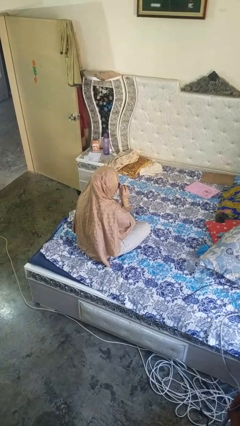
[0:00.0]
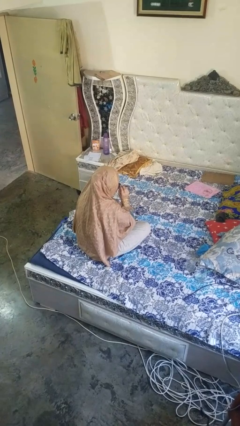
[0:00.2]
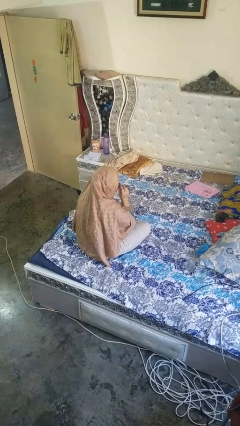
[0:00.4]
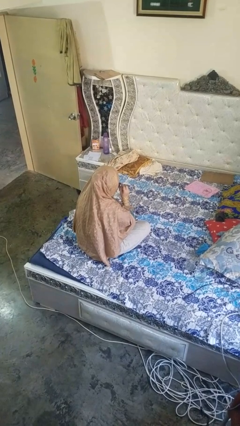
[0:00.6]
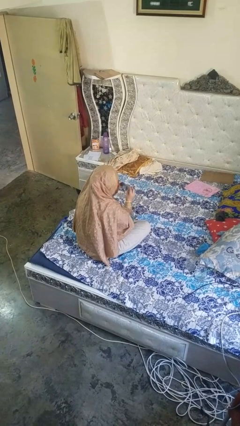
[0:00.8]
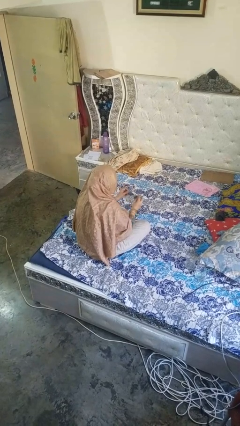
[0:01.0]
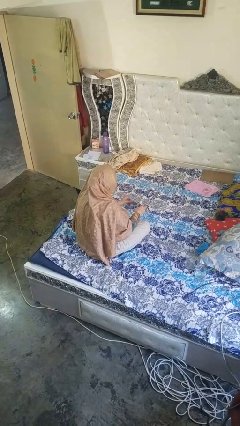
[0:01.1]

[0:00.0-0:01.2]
person takes off glasses

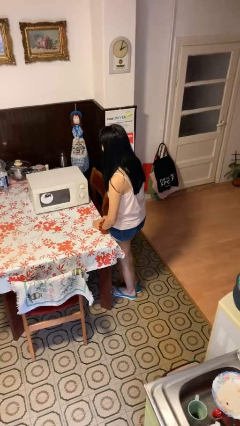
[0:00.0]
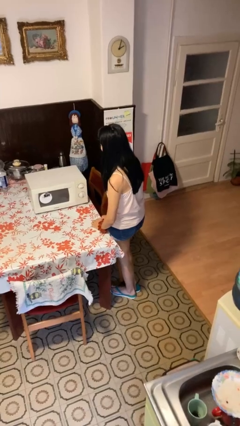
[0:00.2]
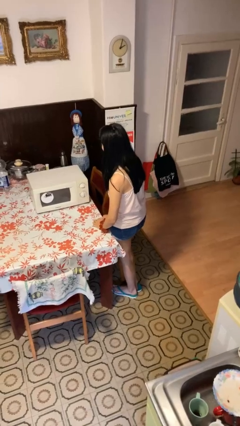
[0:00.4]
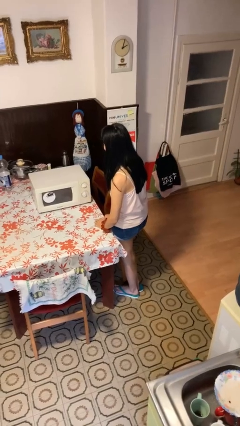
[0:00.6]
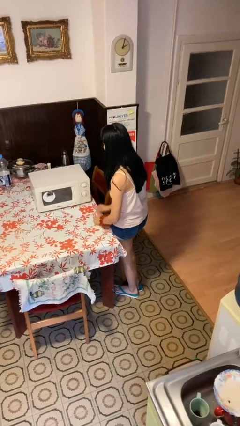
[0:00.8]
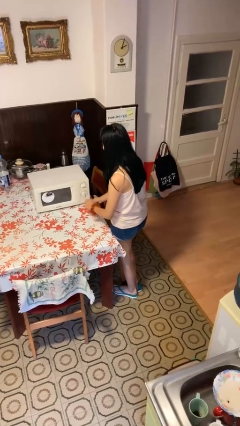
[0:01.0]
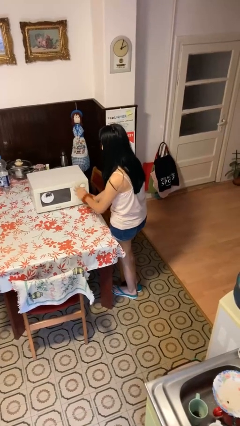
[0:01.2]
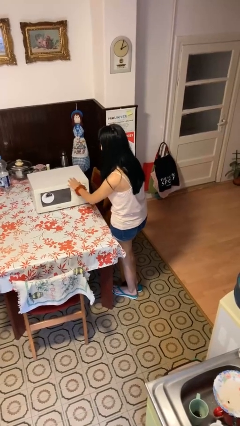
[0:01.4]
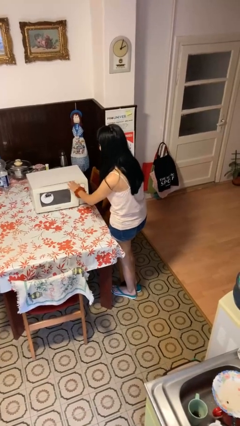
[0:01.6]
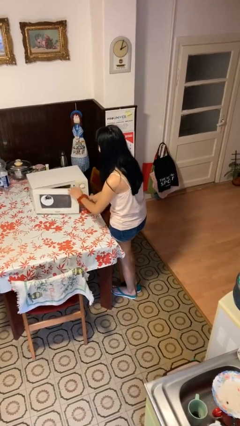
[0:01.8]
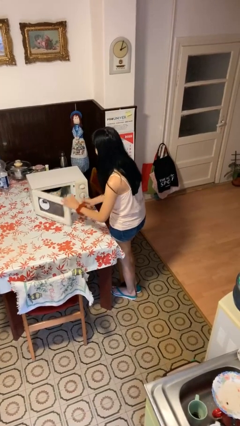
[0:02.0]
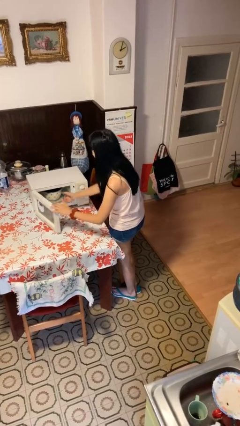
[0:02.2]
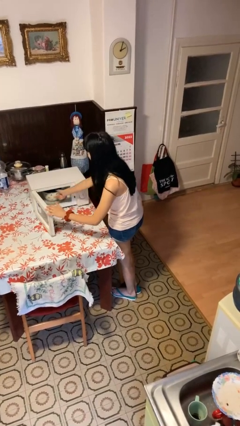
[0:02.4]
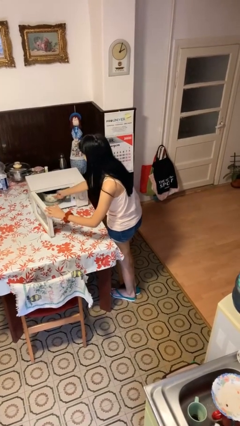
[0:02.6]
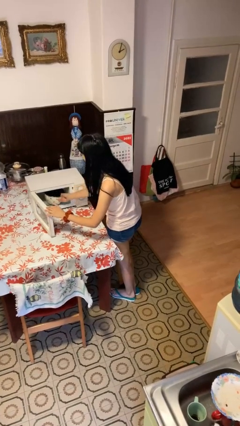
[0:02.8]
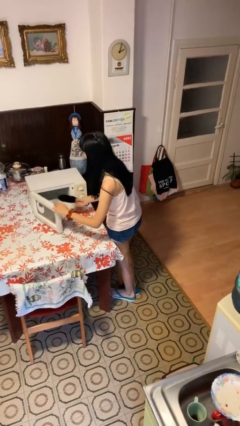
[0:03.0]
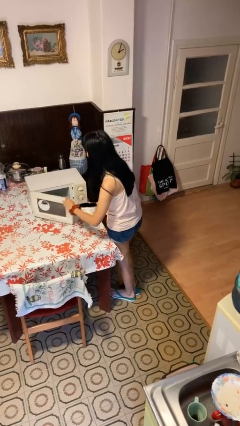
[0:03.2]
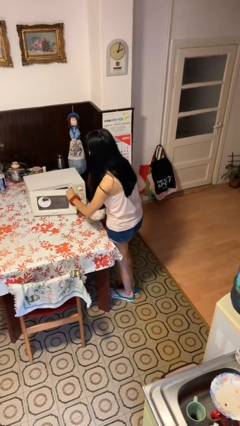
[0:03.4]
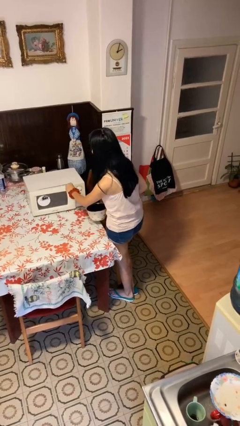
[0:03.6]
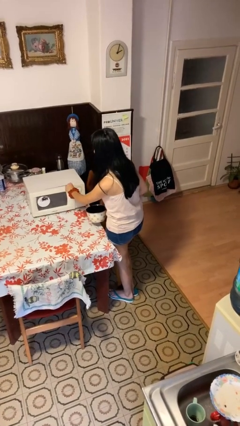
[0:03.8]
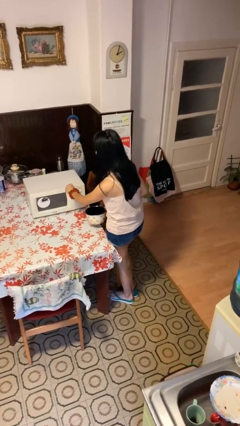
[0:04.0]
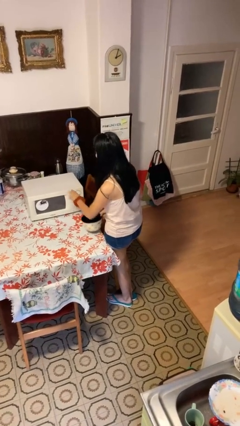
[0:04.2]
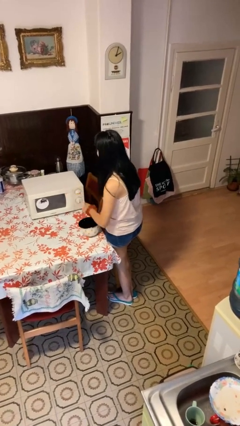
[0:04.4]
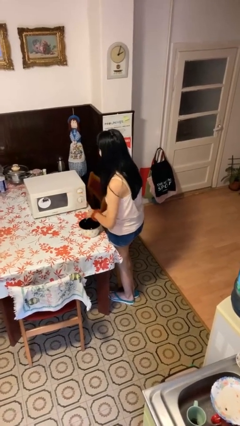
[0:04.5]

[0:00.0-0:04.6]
person takes object from microwave

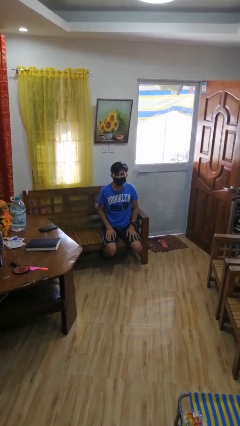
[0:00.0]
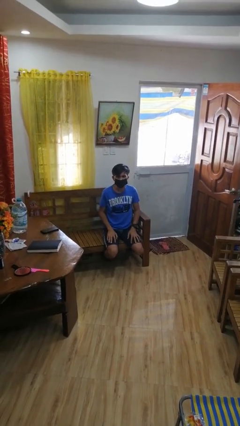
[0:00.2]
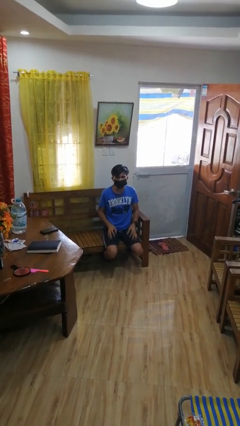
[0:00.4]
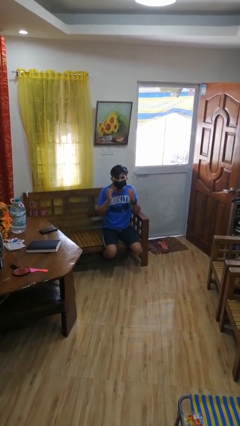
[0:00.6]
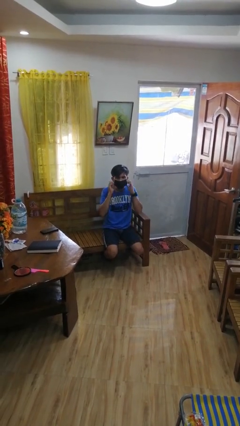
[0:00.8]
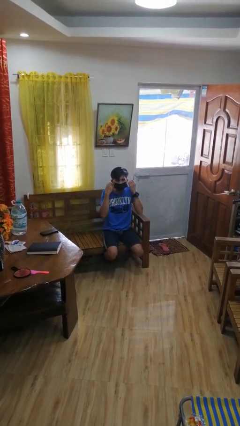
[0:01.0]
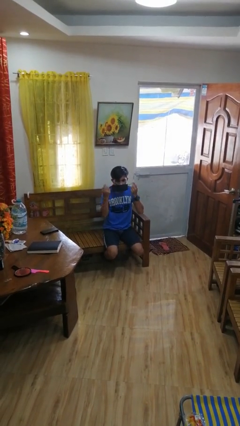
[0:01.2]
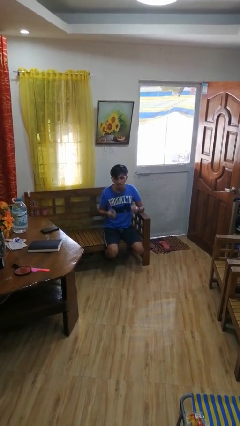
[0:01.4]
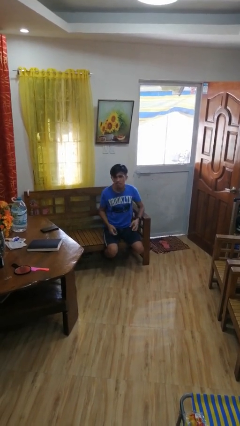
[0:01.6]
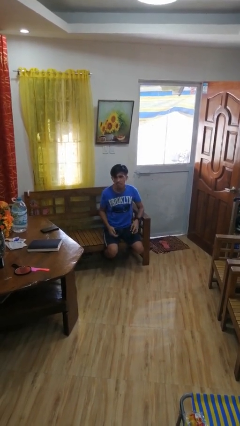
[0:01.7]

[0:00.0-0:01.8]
person takes off facemask

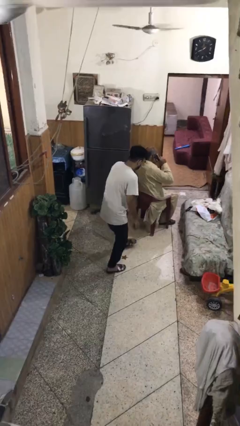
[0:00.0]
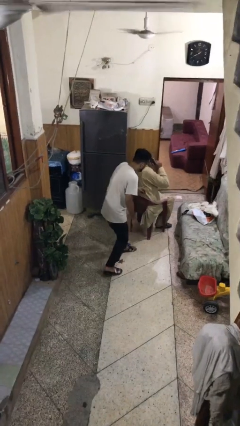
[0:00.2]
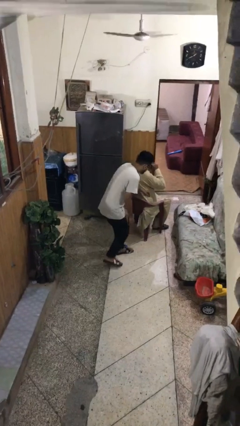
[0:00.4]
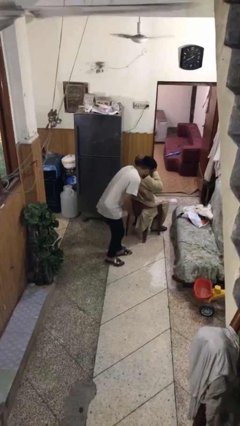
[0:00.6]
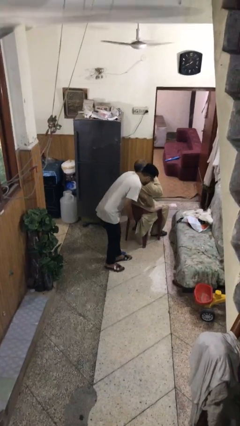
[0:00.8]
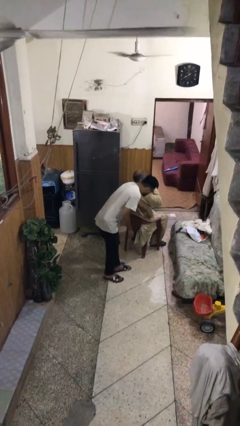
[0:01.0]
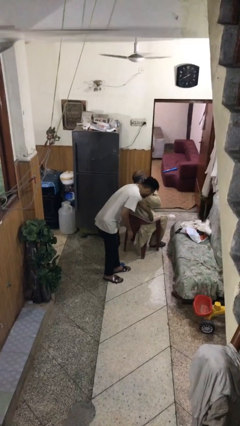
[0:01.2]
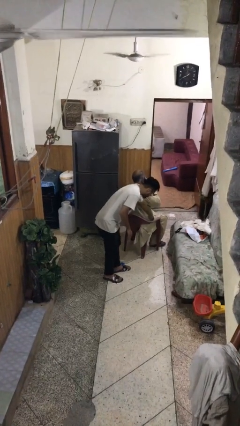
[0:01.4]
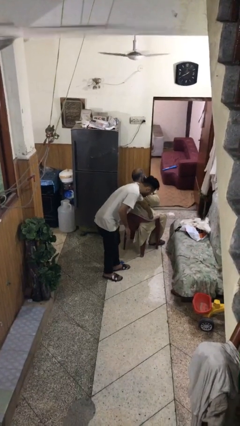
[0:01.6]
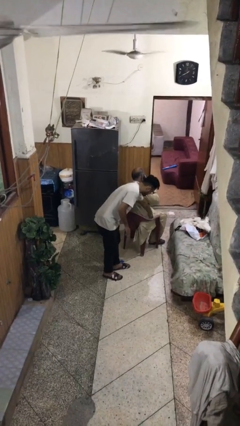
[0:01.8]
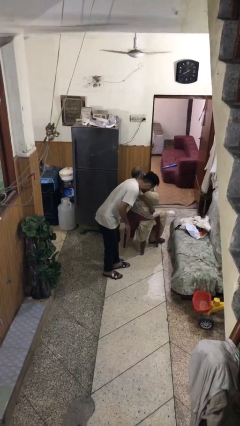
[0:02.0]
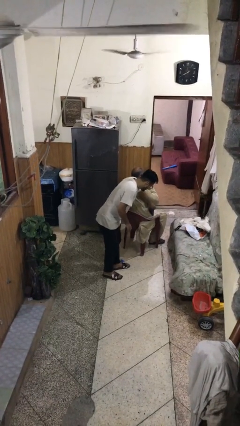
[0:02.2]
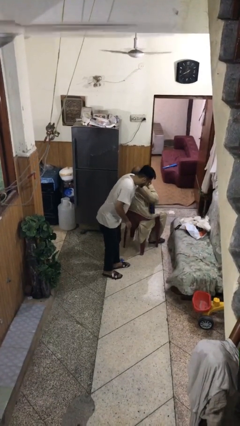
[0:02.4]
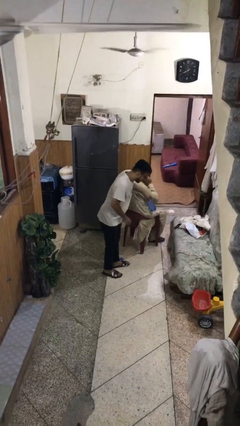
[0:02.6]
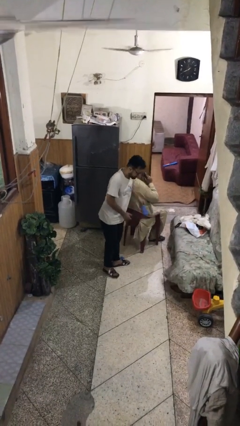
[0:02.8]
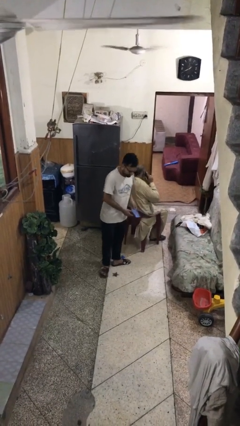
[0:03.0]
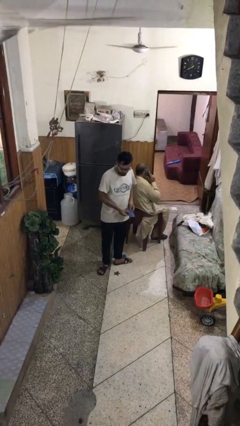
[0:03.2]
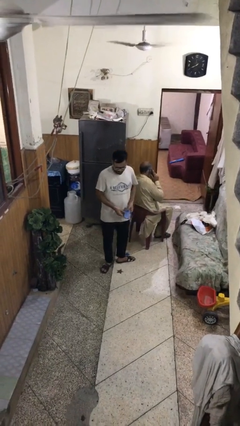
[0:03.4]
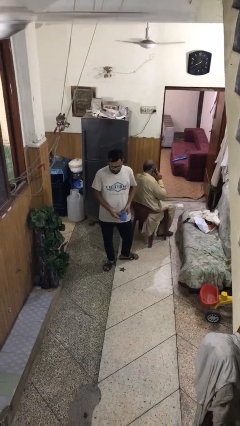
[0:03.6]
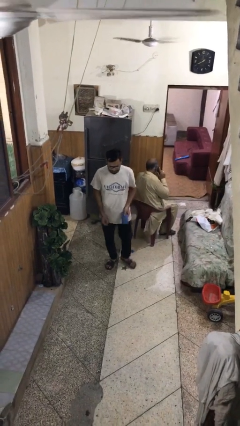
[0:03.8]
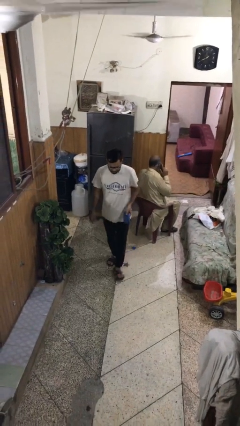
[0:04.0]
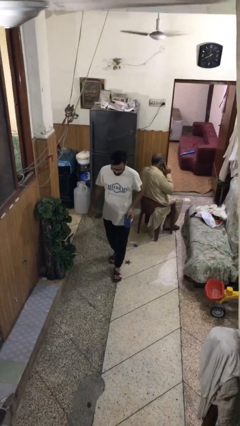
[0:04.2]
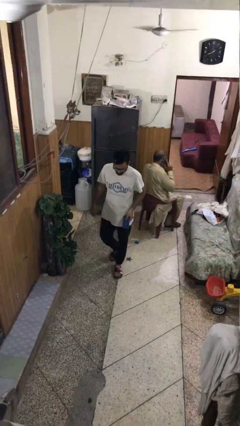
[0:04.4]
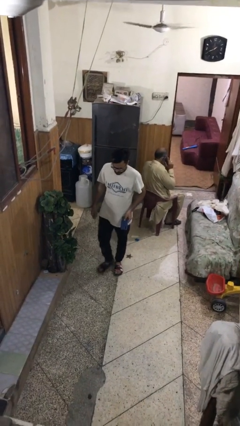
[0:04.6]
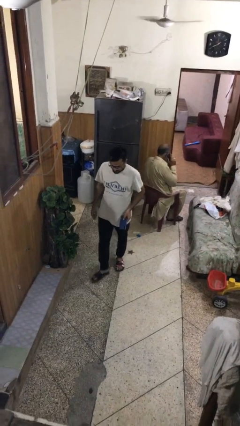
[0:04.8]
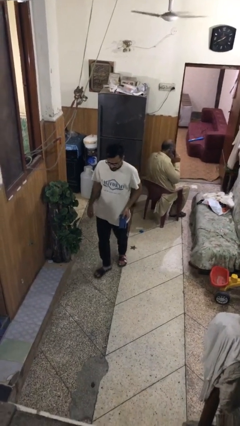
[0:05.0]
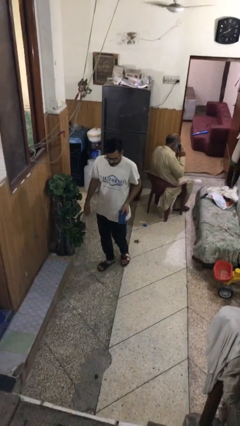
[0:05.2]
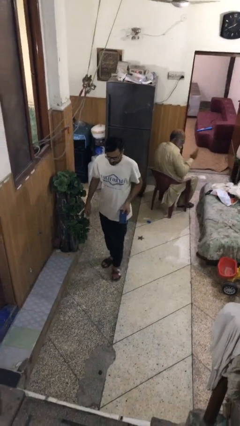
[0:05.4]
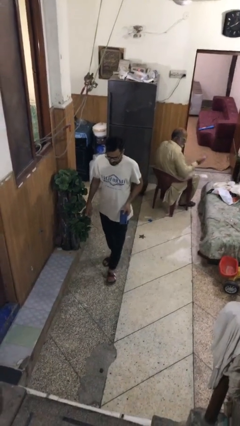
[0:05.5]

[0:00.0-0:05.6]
person steals object from person

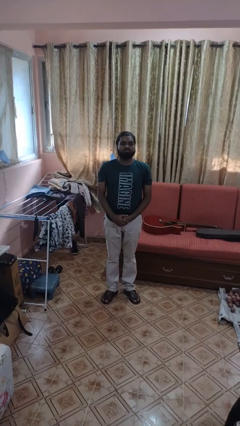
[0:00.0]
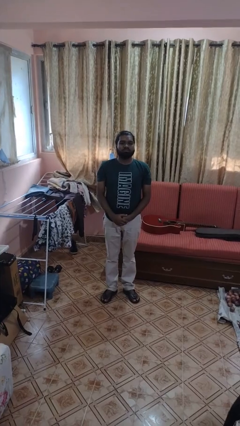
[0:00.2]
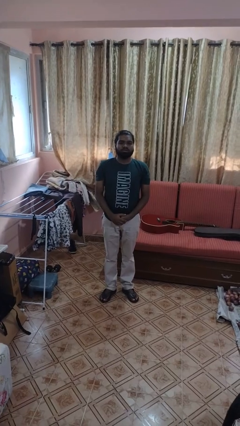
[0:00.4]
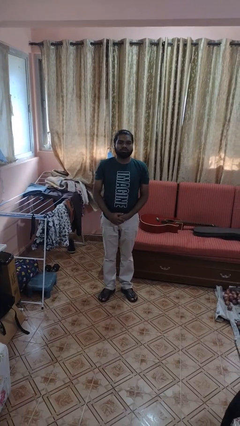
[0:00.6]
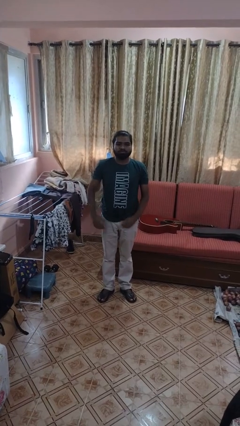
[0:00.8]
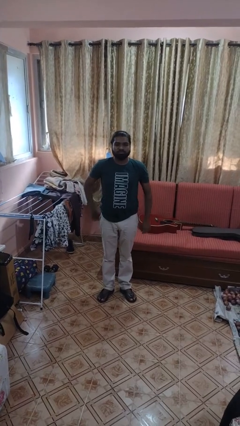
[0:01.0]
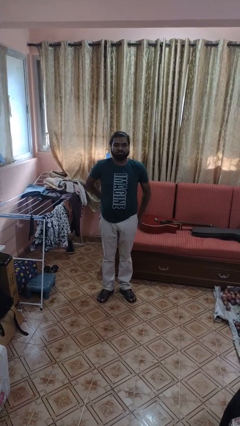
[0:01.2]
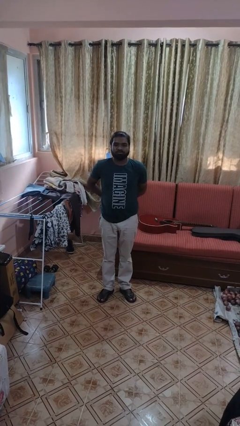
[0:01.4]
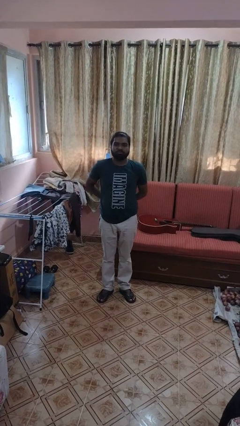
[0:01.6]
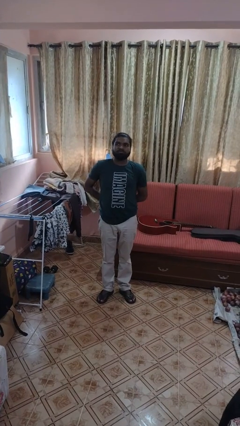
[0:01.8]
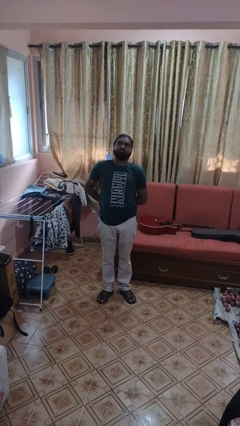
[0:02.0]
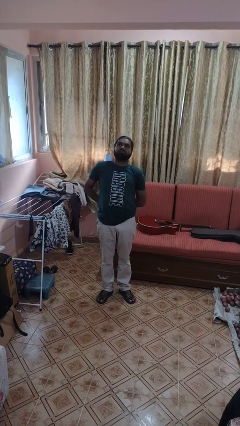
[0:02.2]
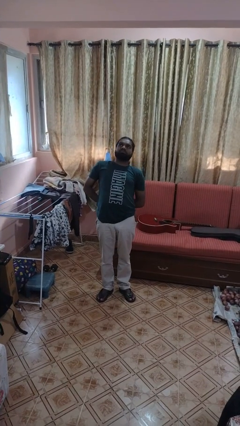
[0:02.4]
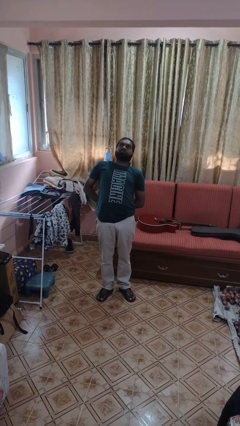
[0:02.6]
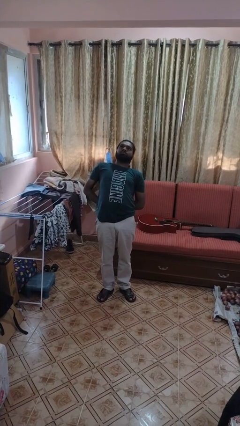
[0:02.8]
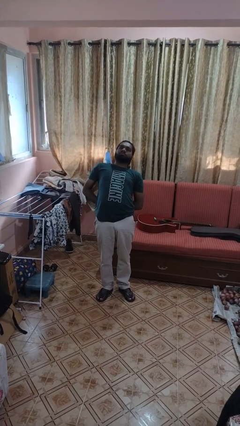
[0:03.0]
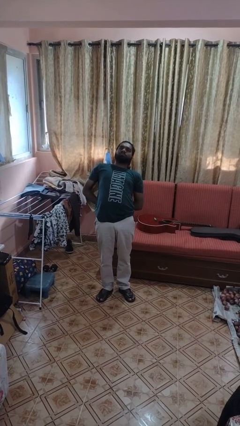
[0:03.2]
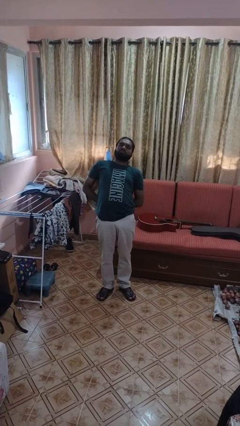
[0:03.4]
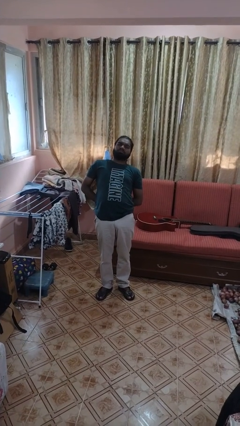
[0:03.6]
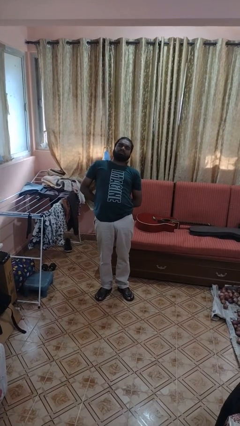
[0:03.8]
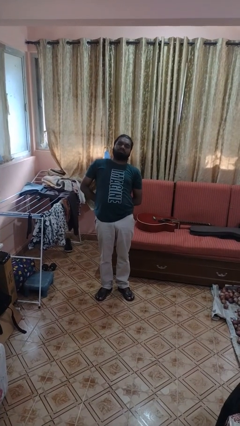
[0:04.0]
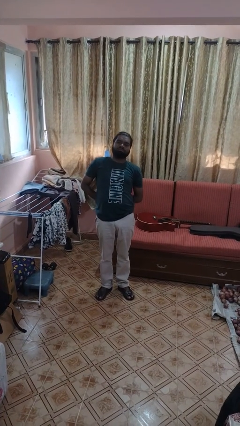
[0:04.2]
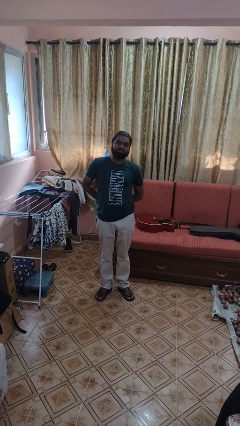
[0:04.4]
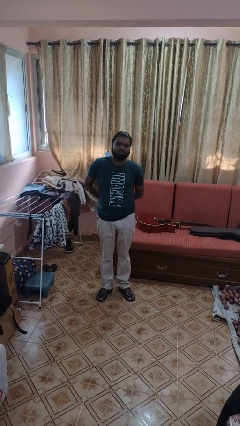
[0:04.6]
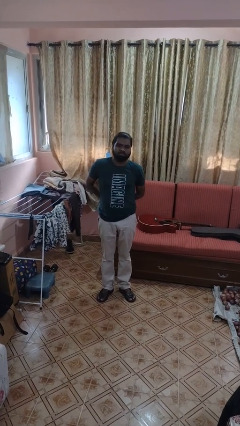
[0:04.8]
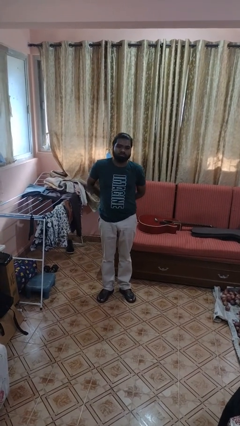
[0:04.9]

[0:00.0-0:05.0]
person stretches back
